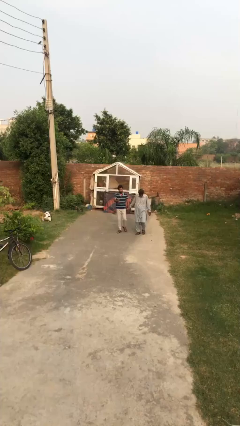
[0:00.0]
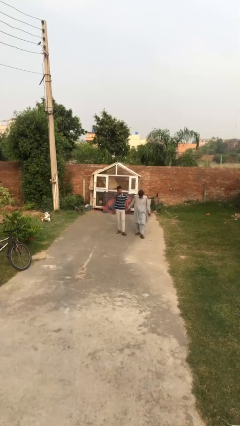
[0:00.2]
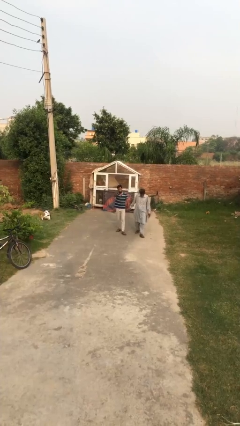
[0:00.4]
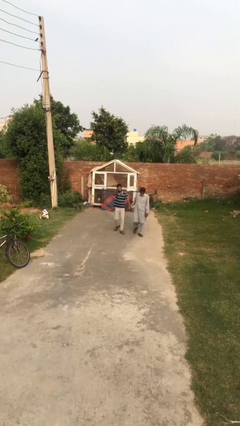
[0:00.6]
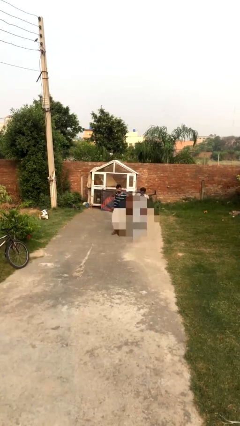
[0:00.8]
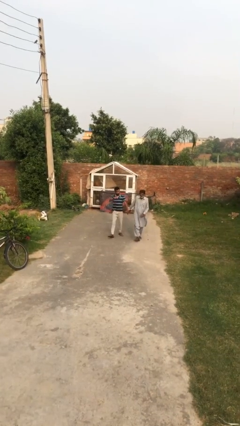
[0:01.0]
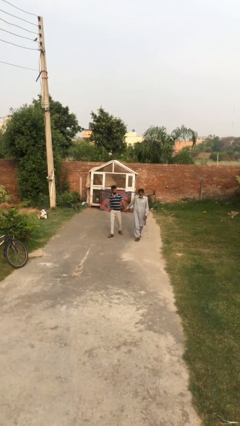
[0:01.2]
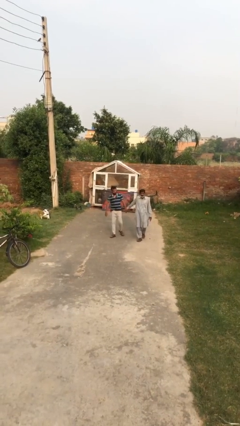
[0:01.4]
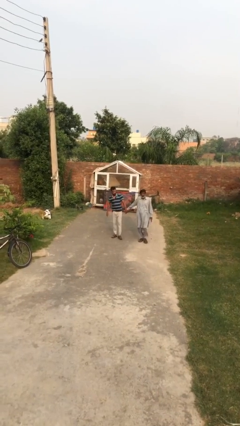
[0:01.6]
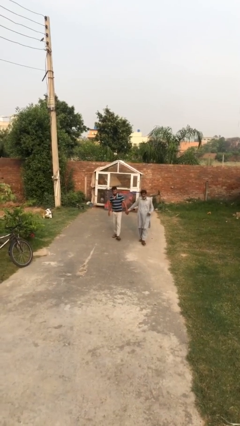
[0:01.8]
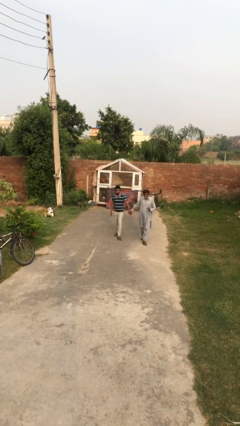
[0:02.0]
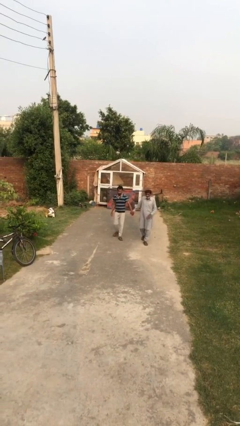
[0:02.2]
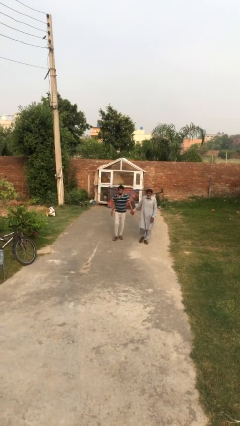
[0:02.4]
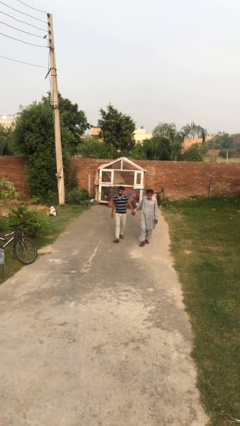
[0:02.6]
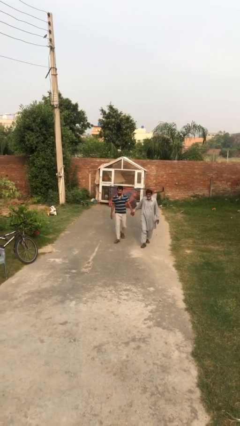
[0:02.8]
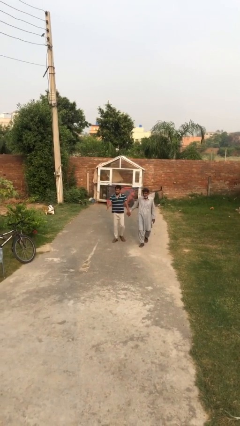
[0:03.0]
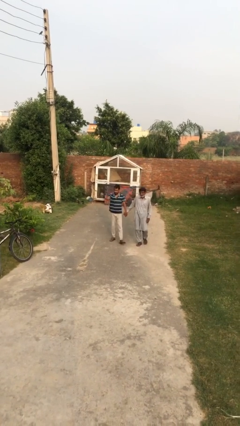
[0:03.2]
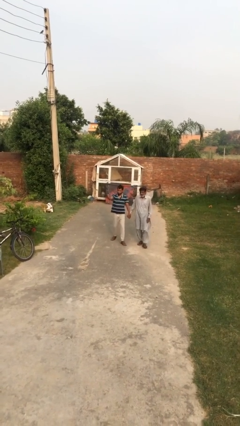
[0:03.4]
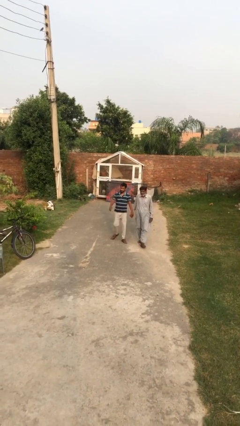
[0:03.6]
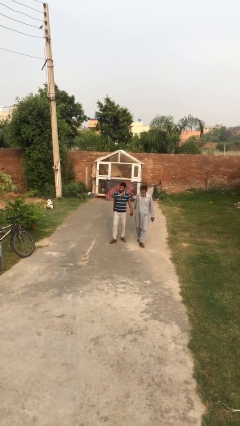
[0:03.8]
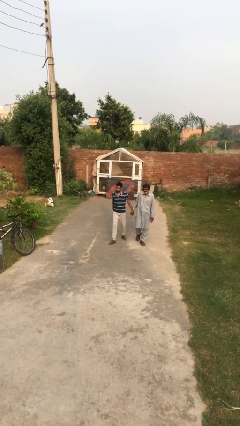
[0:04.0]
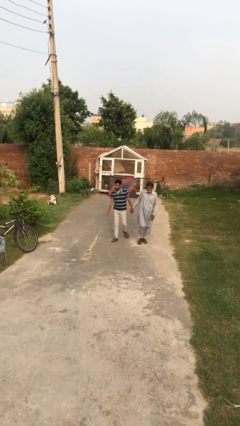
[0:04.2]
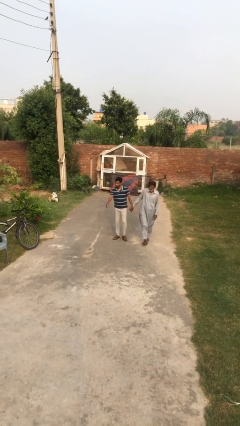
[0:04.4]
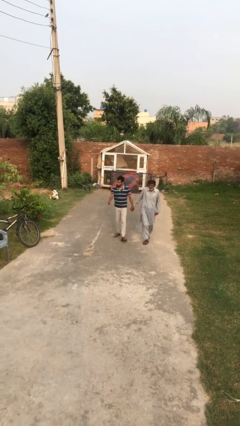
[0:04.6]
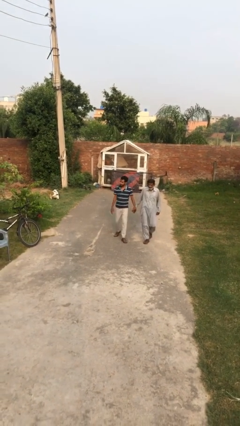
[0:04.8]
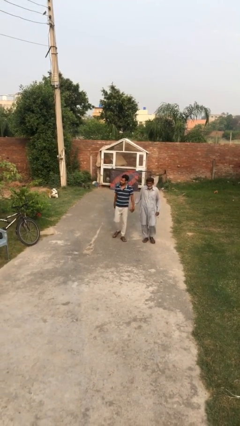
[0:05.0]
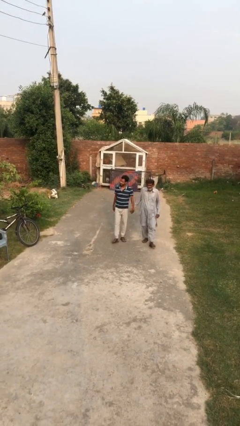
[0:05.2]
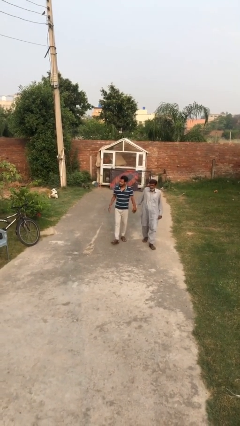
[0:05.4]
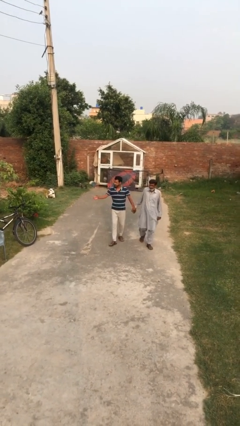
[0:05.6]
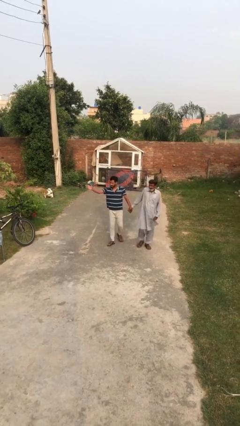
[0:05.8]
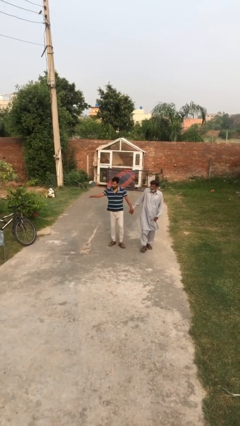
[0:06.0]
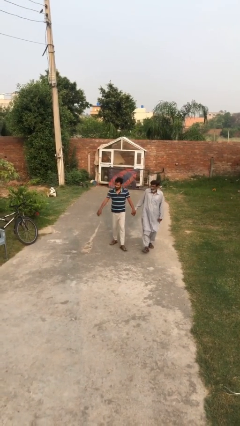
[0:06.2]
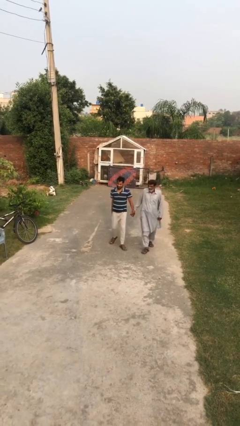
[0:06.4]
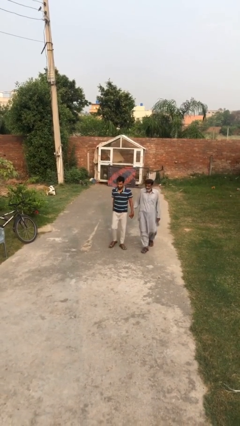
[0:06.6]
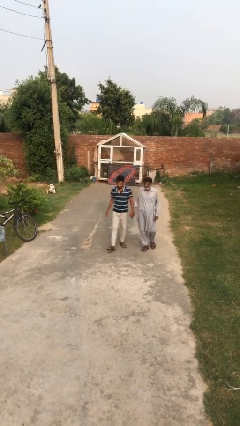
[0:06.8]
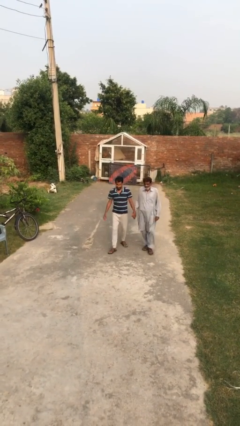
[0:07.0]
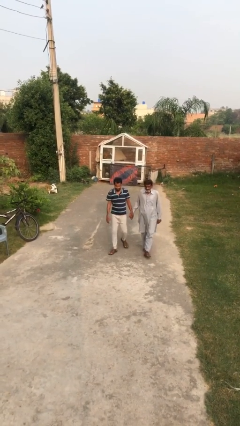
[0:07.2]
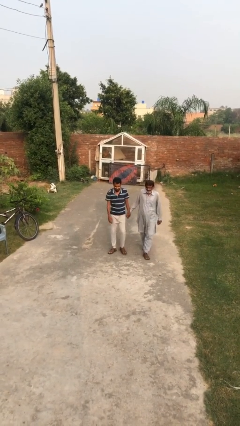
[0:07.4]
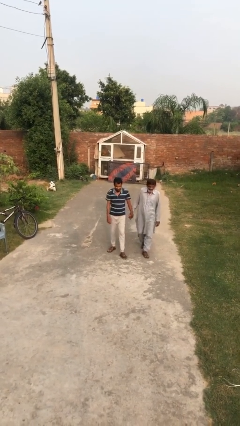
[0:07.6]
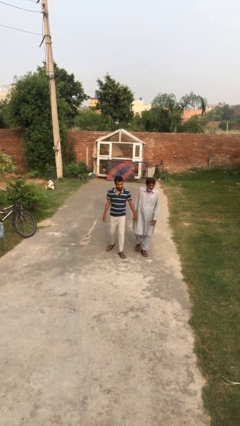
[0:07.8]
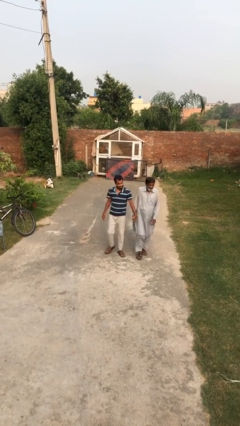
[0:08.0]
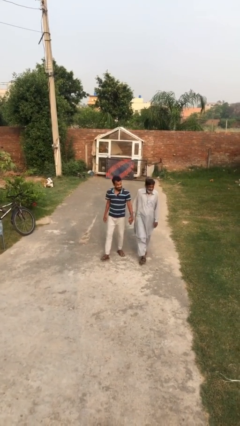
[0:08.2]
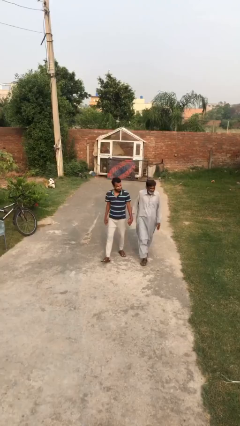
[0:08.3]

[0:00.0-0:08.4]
person holds hand

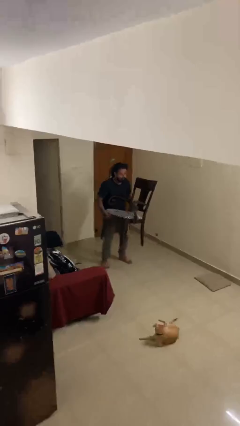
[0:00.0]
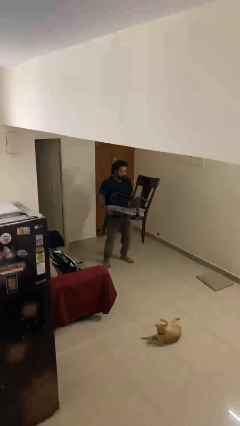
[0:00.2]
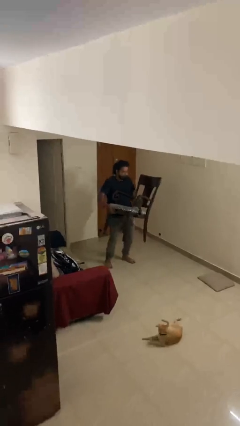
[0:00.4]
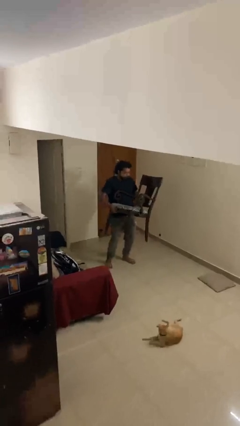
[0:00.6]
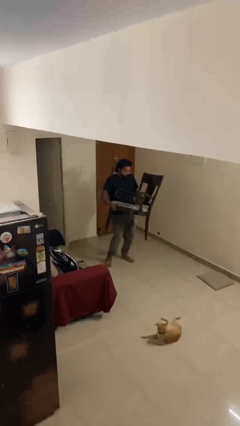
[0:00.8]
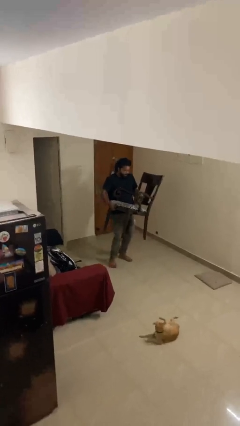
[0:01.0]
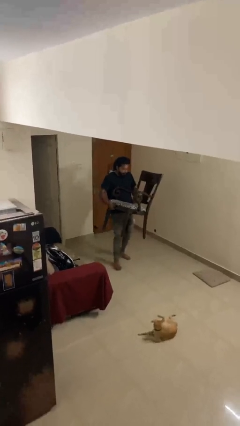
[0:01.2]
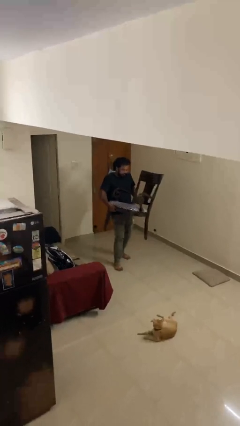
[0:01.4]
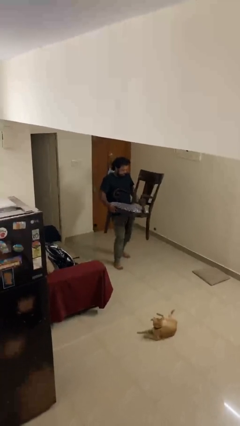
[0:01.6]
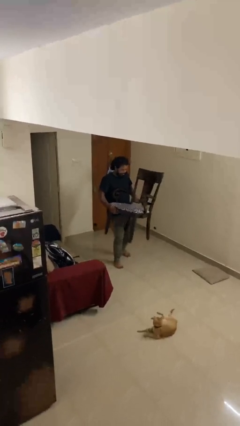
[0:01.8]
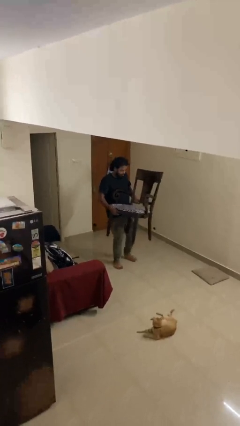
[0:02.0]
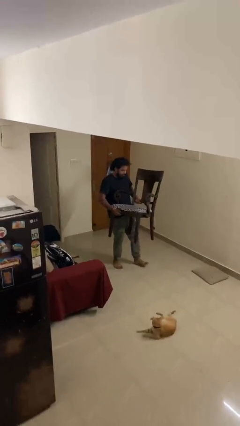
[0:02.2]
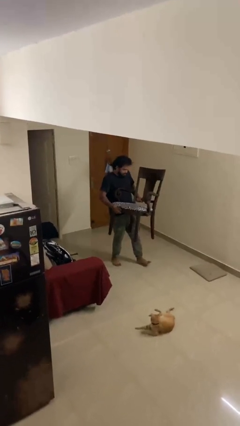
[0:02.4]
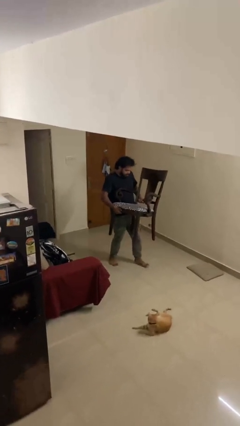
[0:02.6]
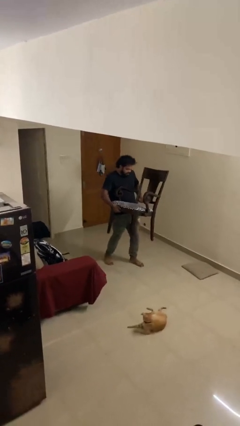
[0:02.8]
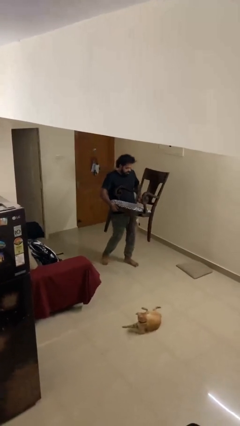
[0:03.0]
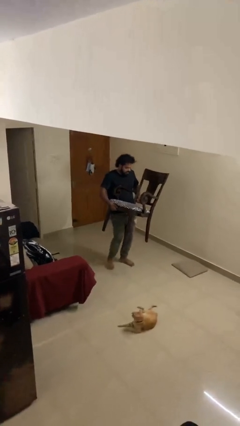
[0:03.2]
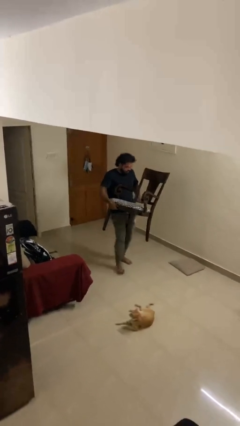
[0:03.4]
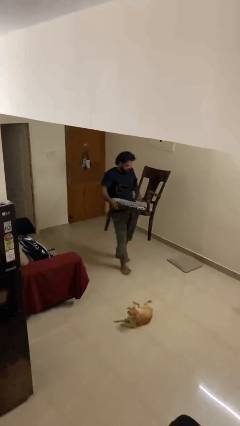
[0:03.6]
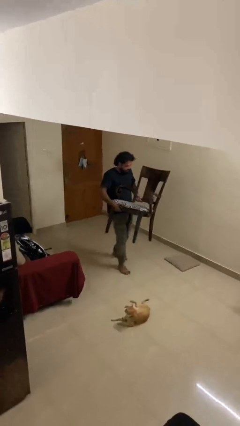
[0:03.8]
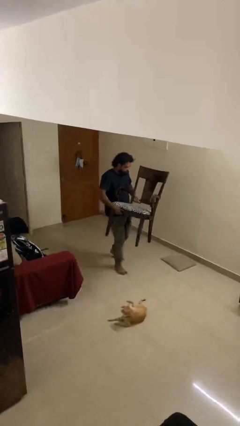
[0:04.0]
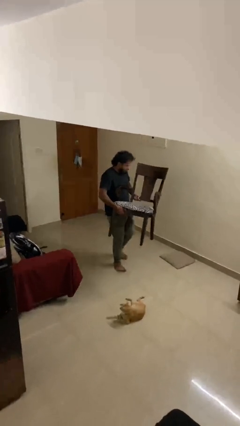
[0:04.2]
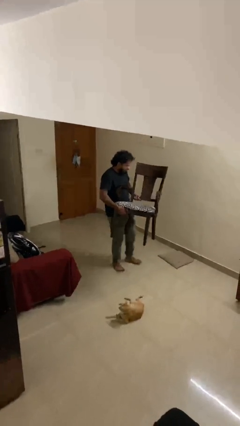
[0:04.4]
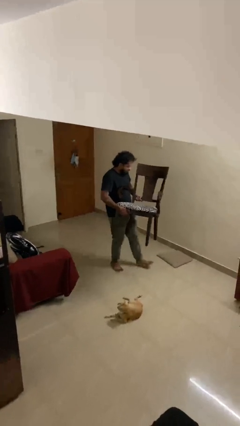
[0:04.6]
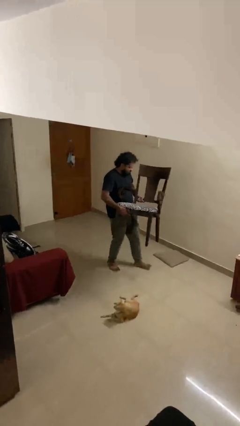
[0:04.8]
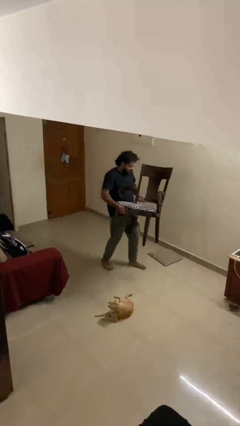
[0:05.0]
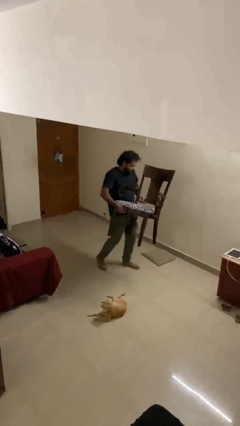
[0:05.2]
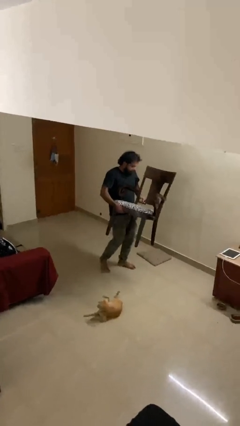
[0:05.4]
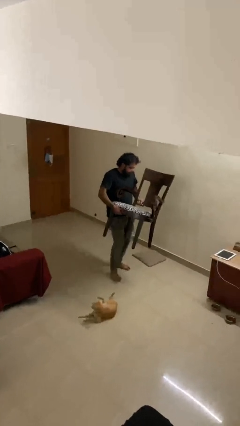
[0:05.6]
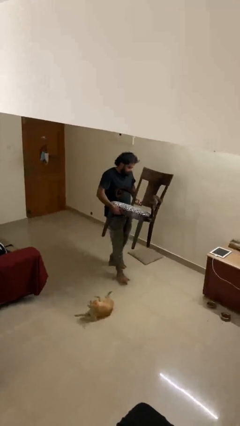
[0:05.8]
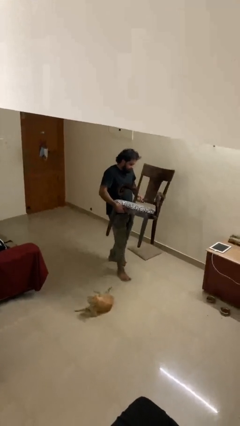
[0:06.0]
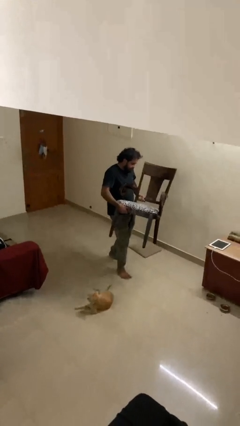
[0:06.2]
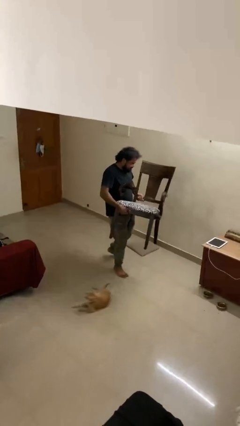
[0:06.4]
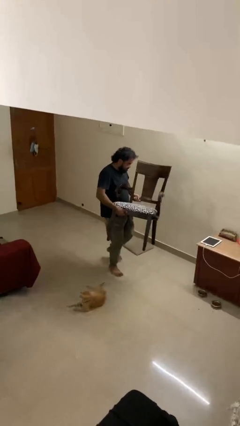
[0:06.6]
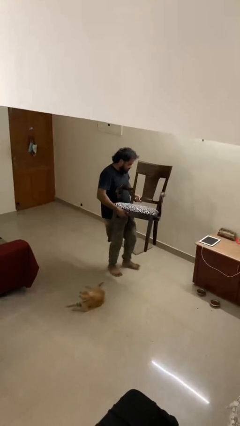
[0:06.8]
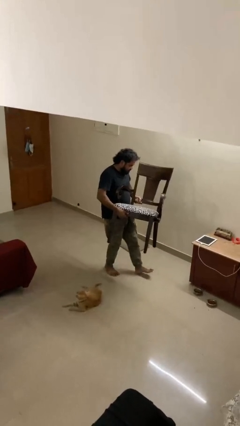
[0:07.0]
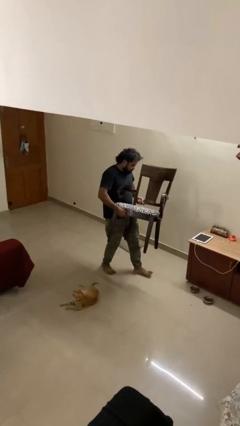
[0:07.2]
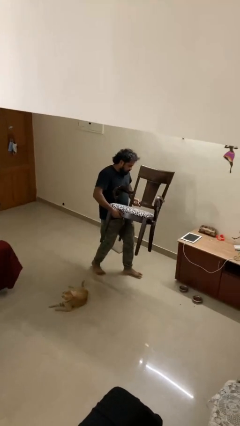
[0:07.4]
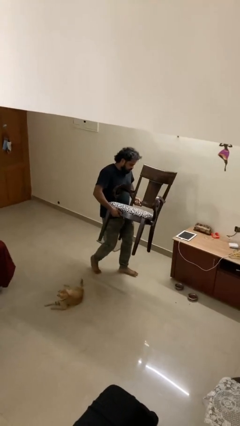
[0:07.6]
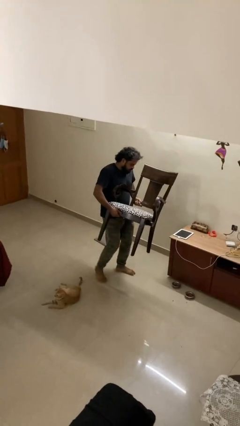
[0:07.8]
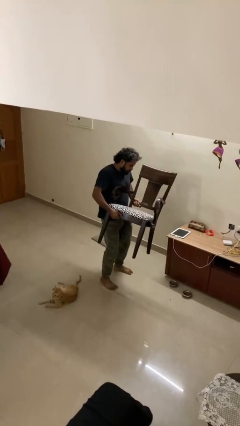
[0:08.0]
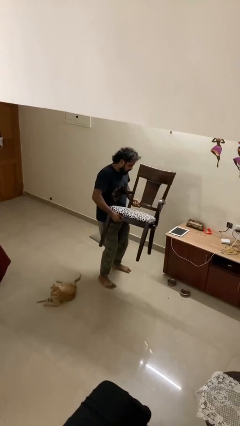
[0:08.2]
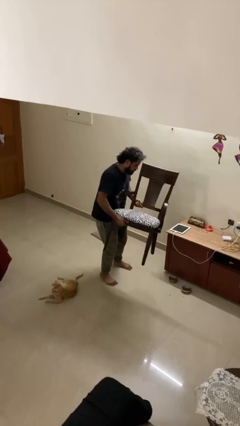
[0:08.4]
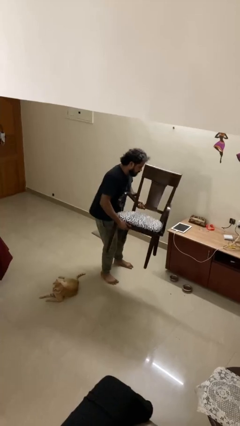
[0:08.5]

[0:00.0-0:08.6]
person carries heavy object

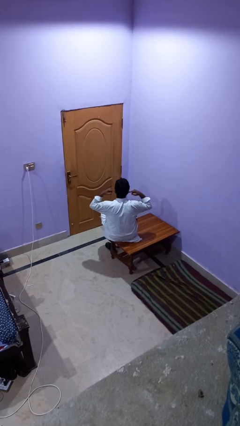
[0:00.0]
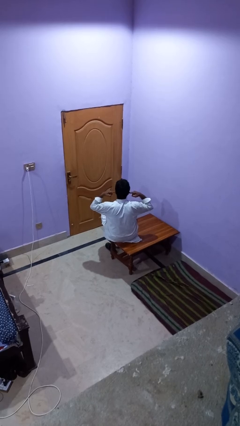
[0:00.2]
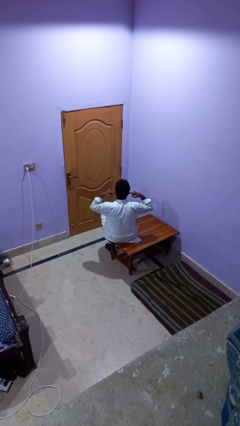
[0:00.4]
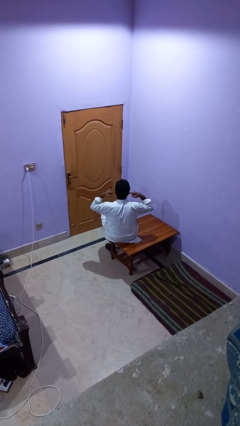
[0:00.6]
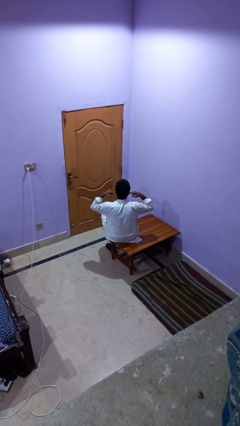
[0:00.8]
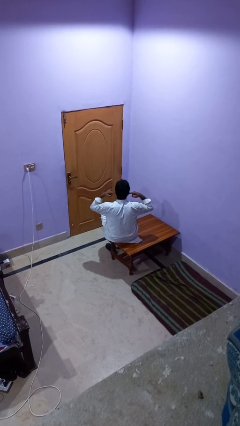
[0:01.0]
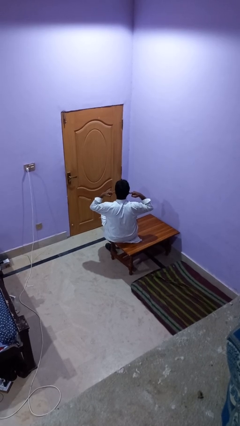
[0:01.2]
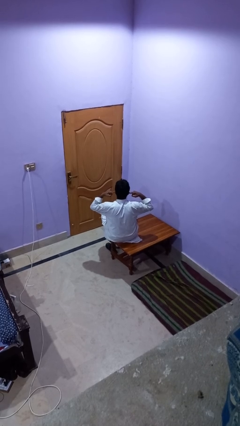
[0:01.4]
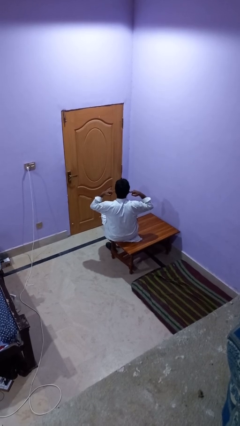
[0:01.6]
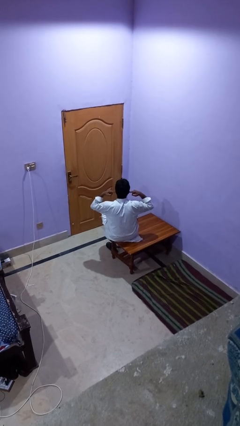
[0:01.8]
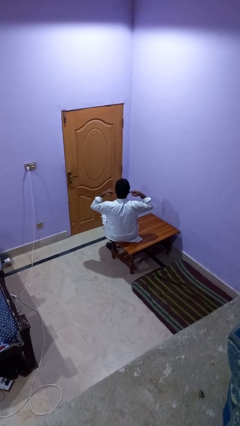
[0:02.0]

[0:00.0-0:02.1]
person puts fingers in ear
